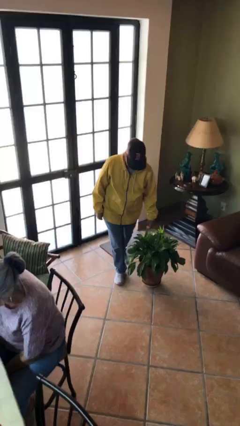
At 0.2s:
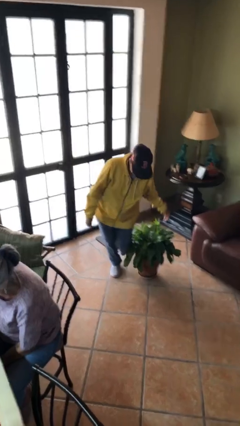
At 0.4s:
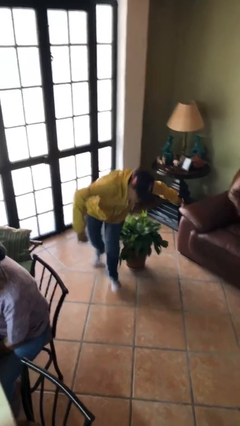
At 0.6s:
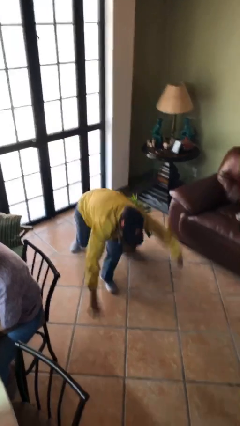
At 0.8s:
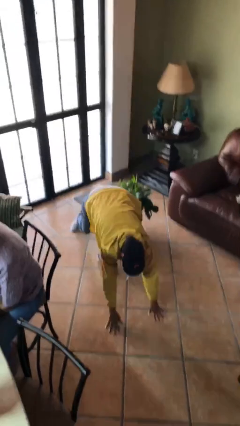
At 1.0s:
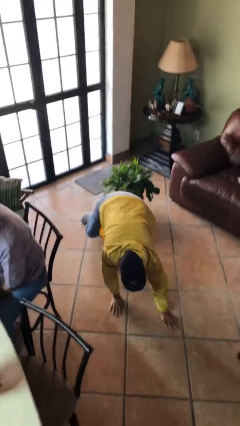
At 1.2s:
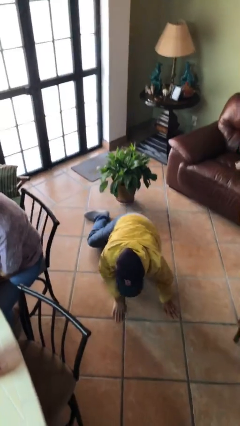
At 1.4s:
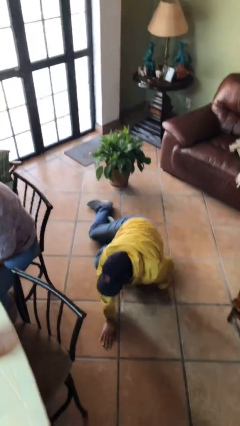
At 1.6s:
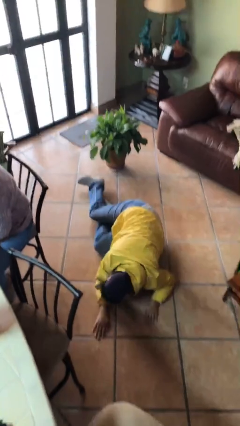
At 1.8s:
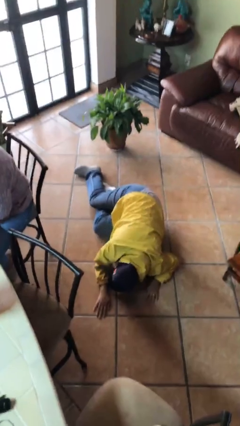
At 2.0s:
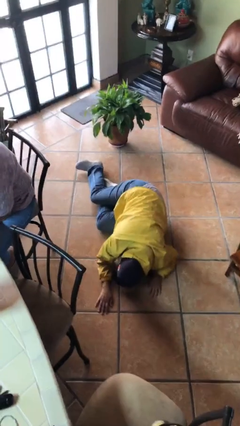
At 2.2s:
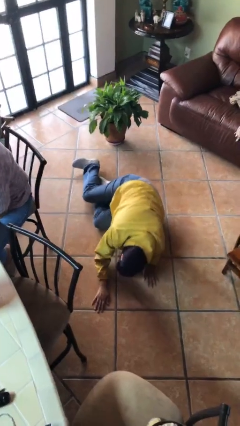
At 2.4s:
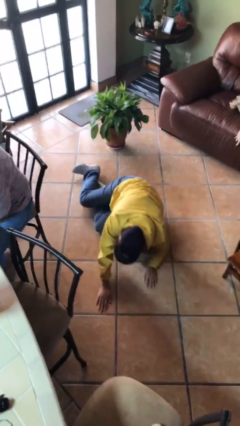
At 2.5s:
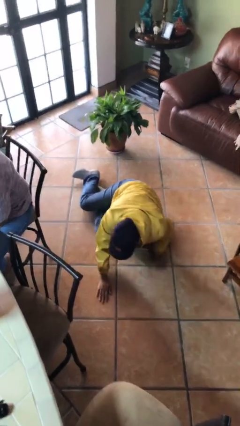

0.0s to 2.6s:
person trips on object on floor

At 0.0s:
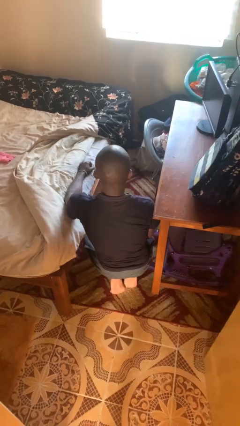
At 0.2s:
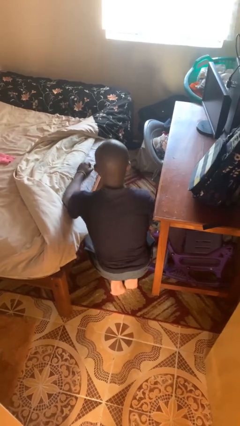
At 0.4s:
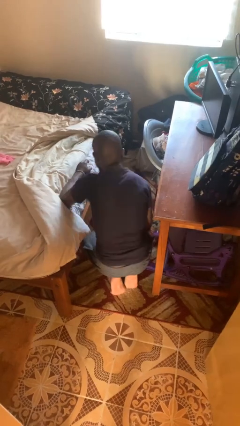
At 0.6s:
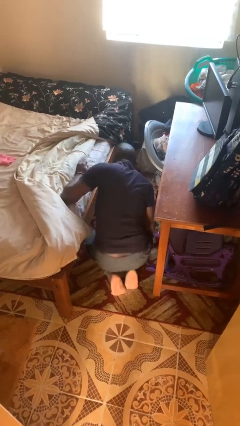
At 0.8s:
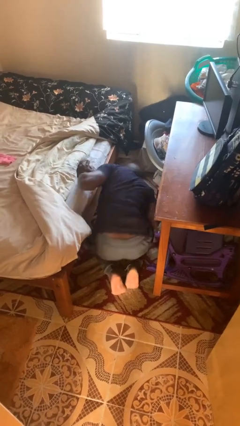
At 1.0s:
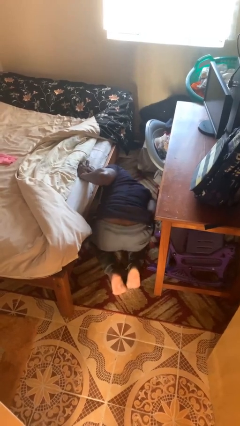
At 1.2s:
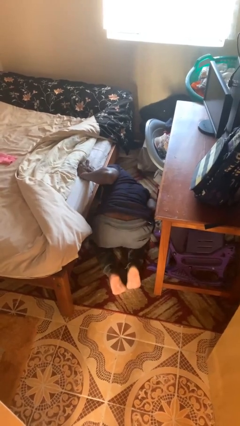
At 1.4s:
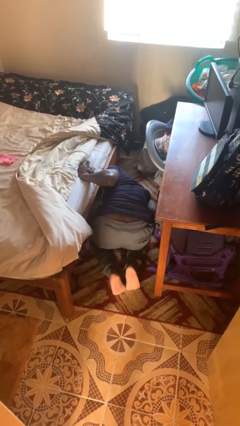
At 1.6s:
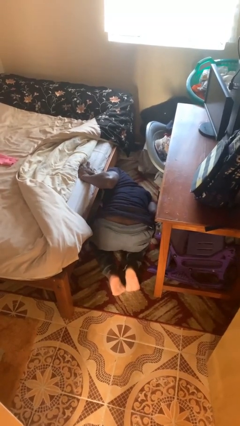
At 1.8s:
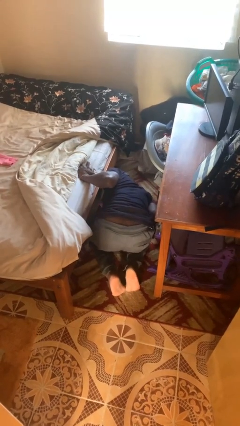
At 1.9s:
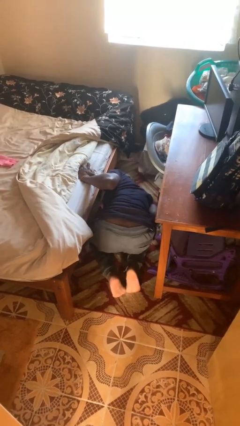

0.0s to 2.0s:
person searches under bed

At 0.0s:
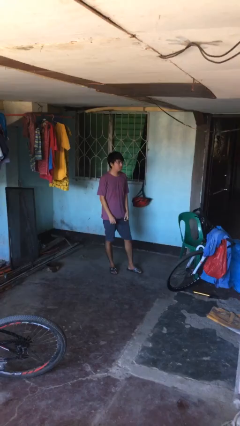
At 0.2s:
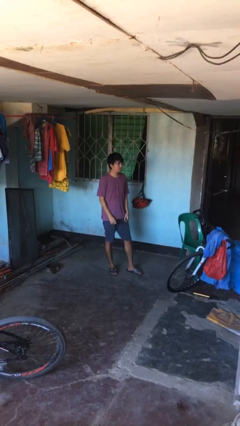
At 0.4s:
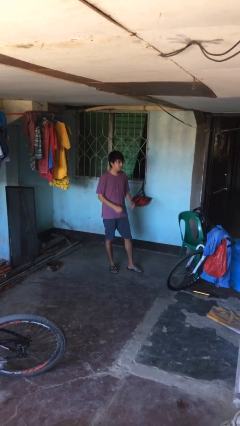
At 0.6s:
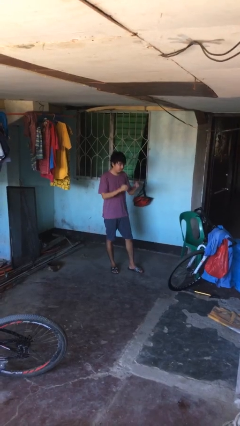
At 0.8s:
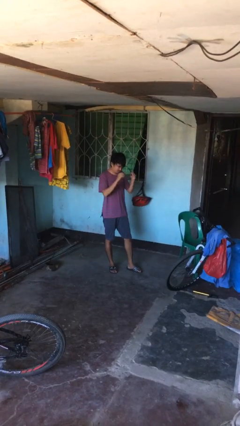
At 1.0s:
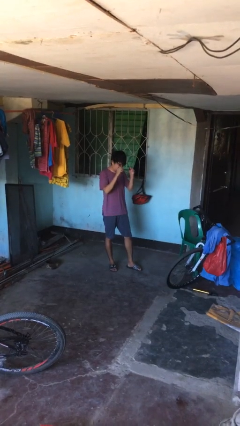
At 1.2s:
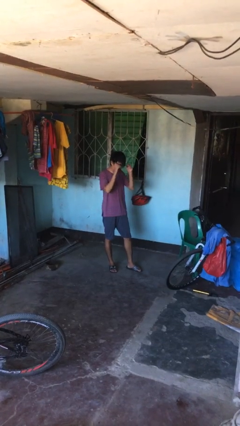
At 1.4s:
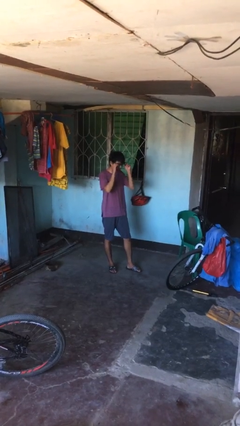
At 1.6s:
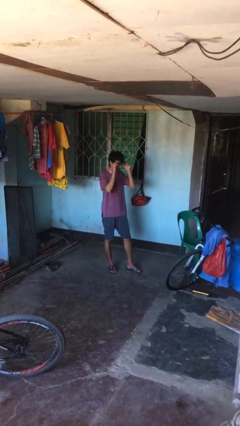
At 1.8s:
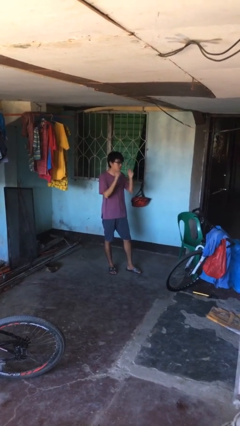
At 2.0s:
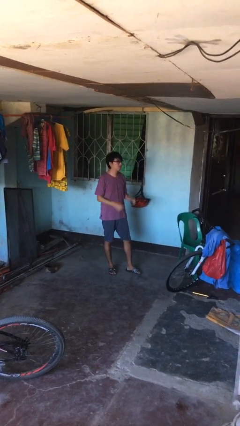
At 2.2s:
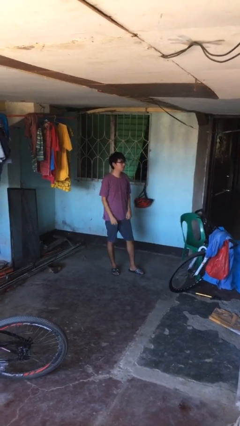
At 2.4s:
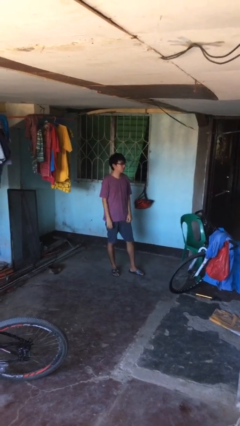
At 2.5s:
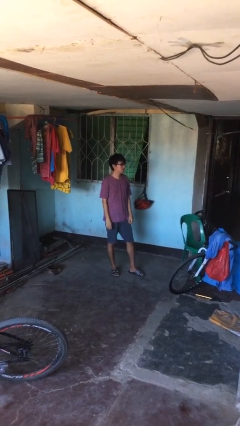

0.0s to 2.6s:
person puts on glasses

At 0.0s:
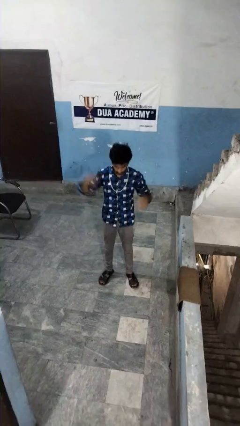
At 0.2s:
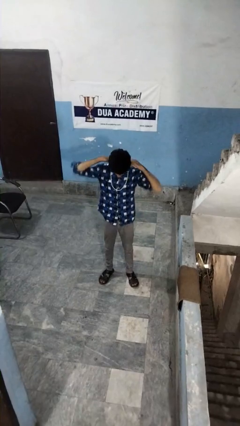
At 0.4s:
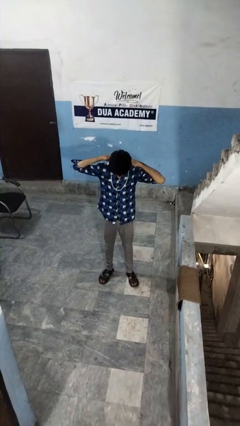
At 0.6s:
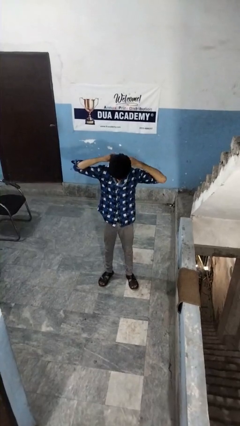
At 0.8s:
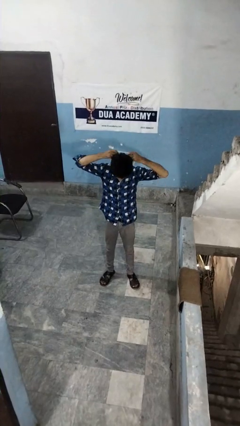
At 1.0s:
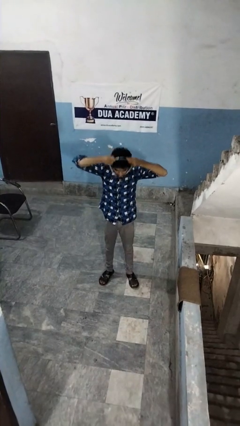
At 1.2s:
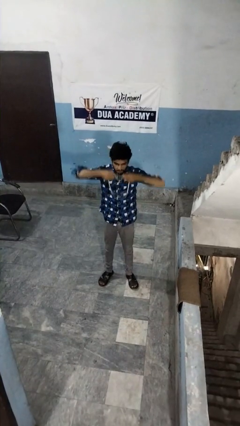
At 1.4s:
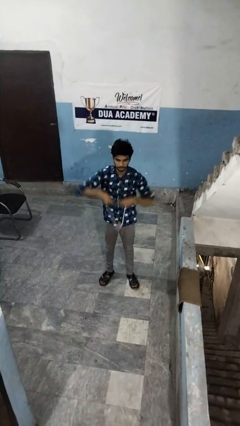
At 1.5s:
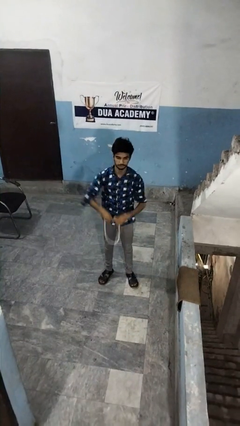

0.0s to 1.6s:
person takes off necklace

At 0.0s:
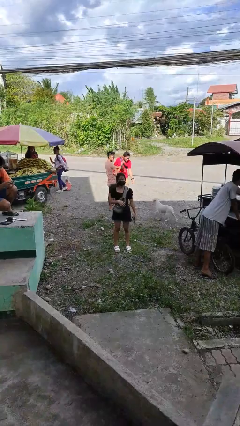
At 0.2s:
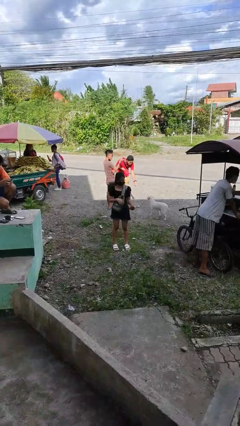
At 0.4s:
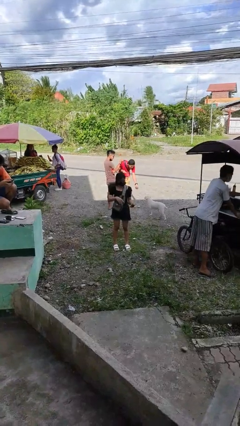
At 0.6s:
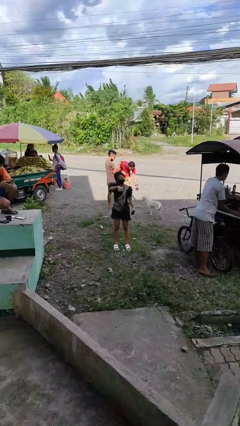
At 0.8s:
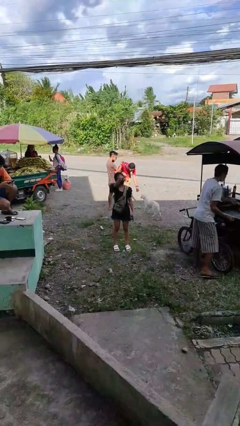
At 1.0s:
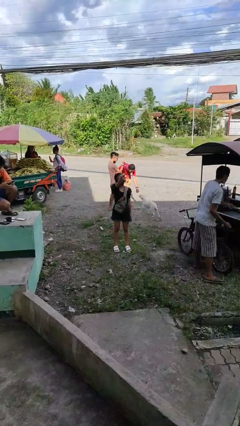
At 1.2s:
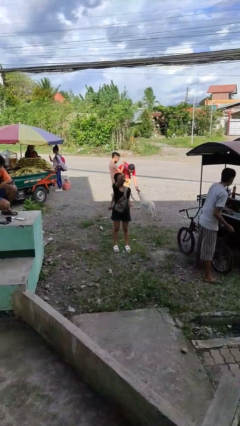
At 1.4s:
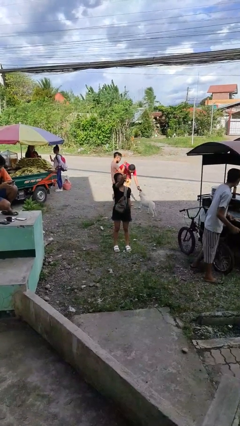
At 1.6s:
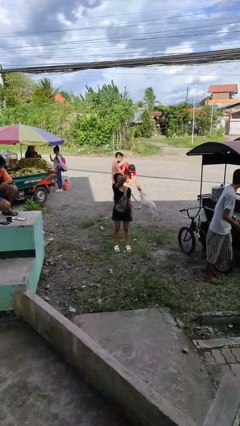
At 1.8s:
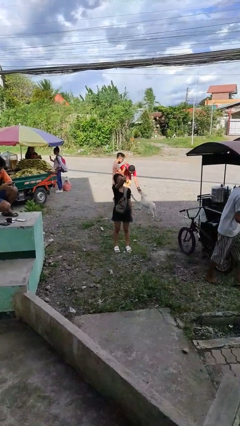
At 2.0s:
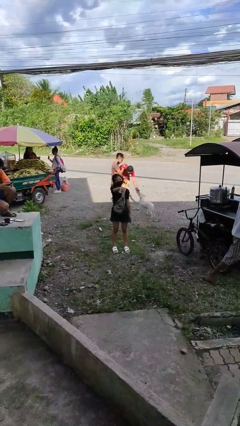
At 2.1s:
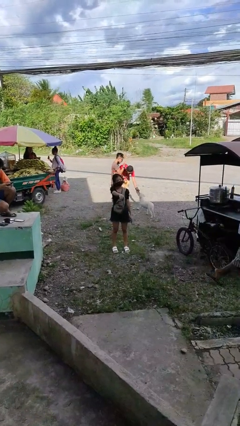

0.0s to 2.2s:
person points at person

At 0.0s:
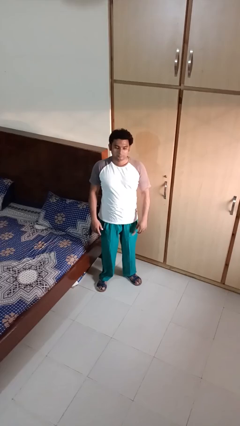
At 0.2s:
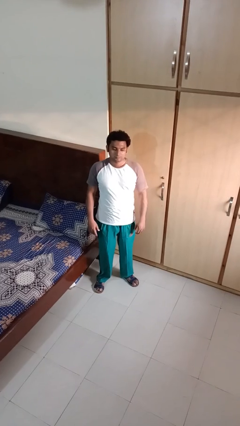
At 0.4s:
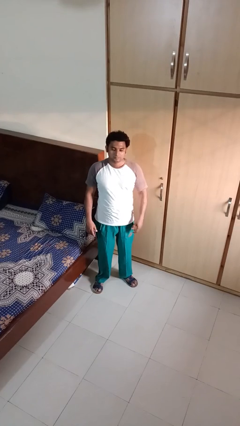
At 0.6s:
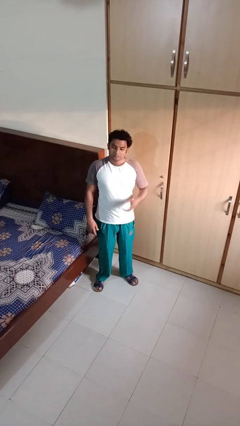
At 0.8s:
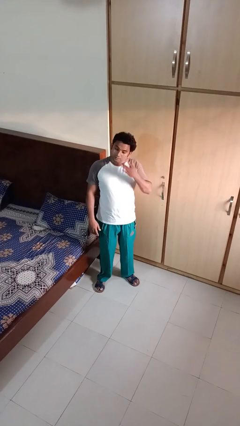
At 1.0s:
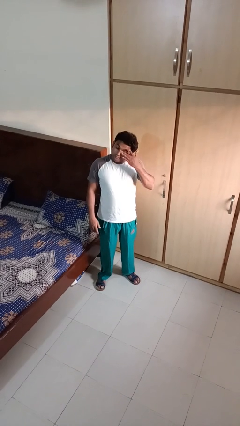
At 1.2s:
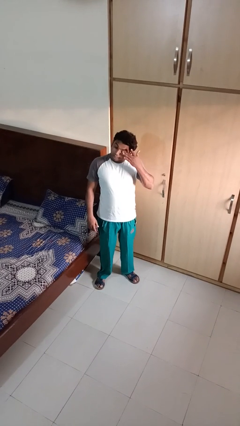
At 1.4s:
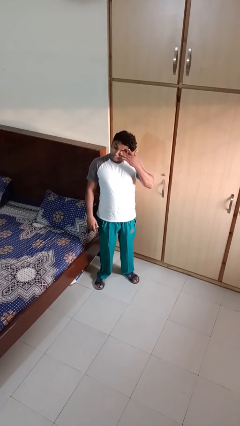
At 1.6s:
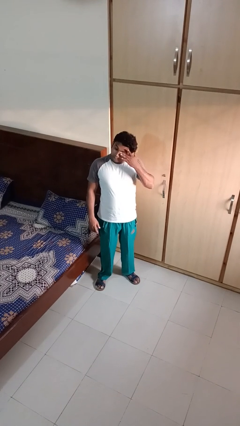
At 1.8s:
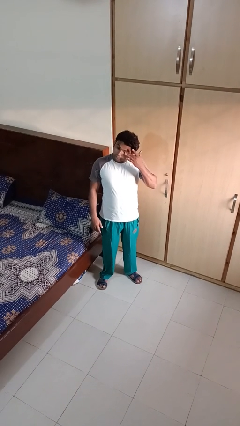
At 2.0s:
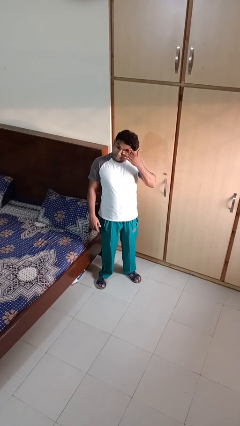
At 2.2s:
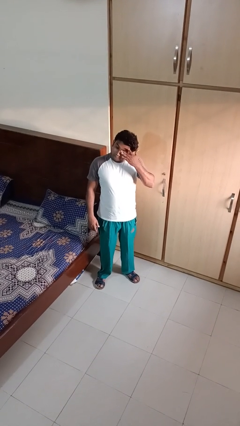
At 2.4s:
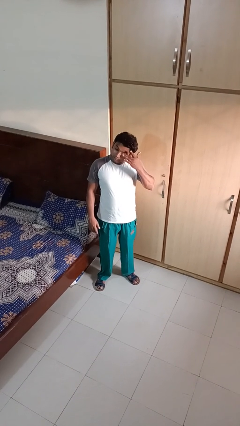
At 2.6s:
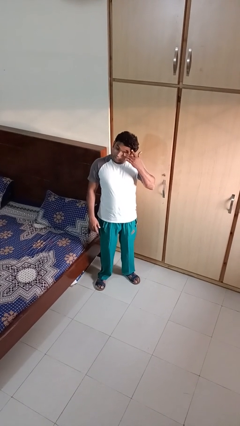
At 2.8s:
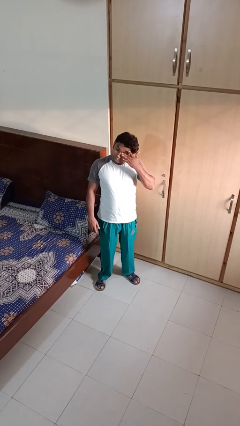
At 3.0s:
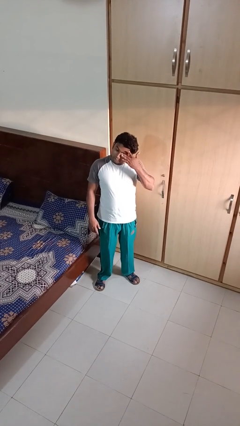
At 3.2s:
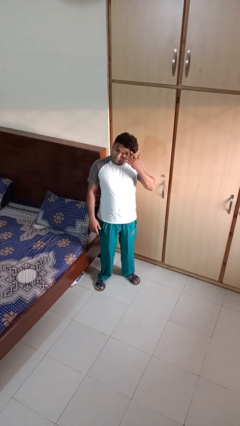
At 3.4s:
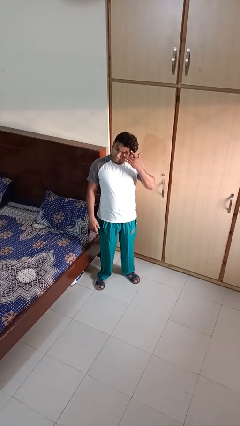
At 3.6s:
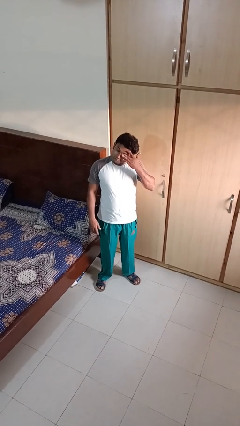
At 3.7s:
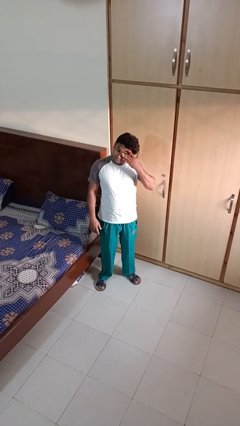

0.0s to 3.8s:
person rubs eyes

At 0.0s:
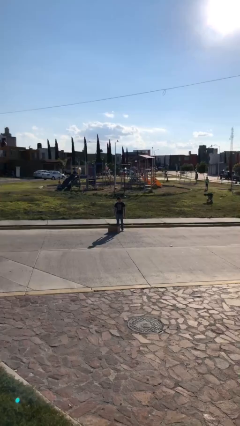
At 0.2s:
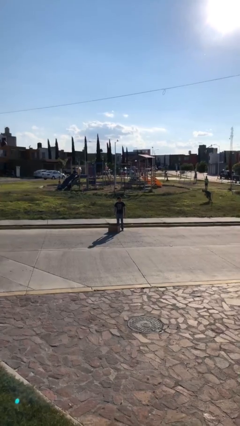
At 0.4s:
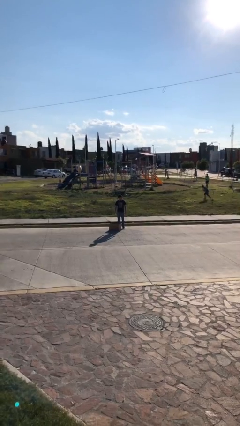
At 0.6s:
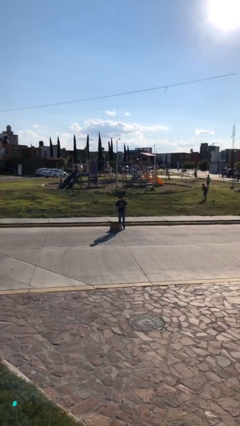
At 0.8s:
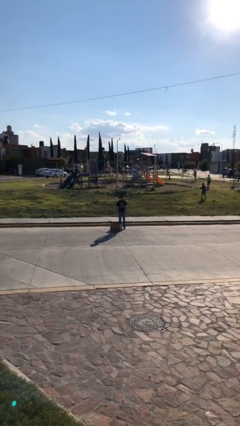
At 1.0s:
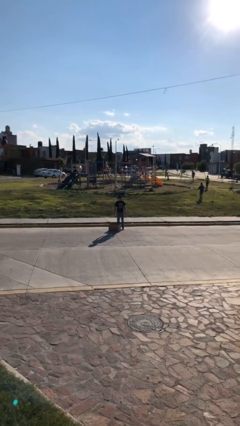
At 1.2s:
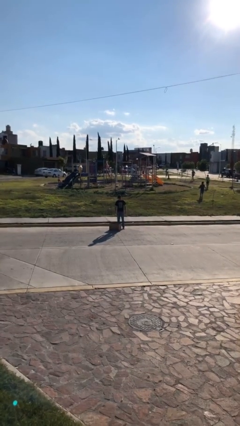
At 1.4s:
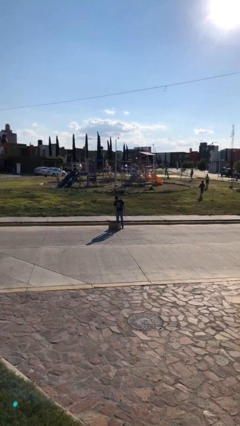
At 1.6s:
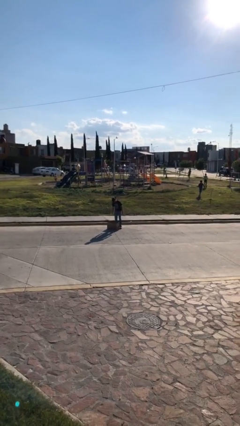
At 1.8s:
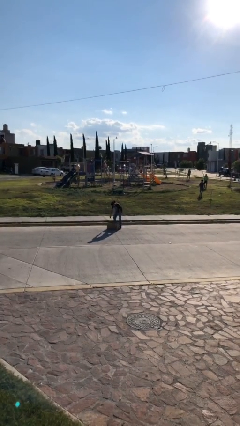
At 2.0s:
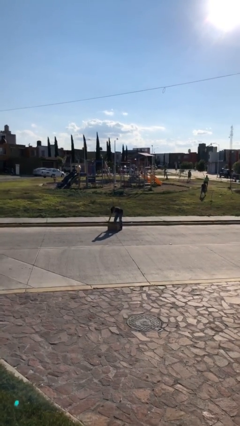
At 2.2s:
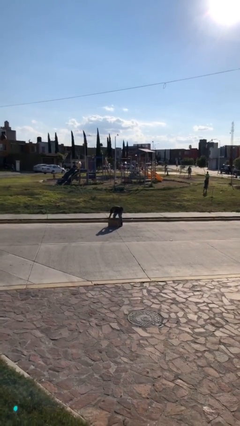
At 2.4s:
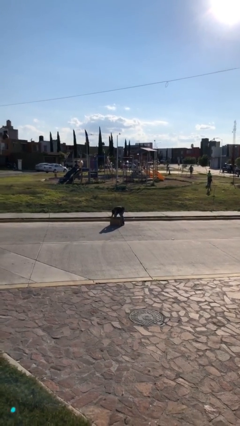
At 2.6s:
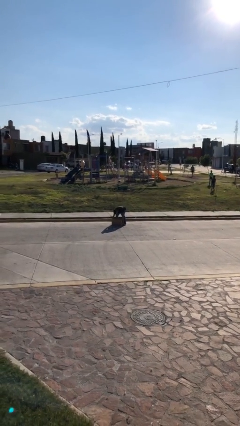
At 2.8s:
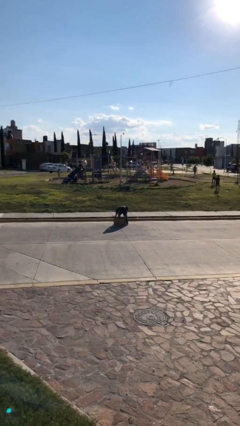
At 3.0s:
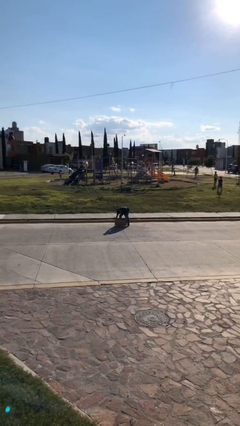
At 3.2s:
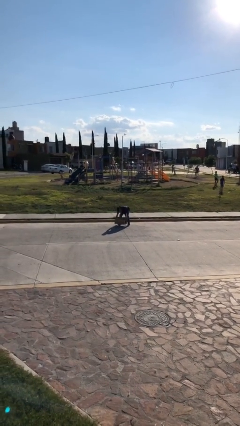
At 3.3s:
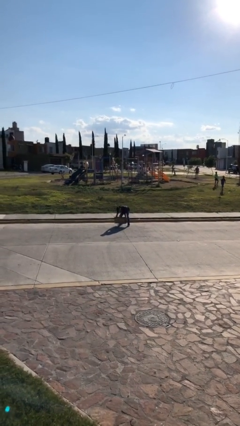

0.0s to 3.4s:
person picks up object from floor
